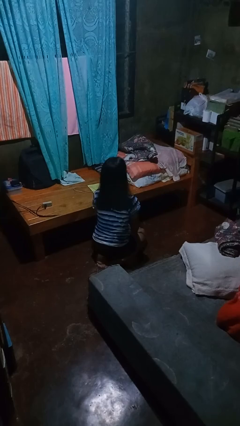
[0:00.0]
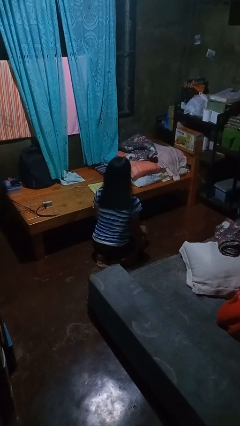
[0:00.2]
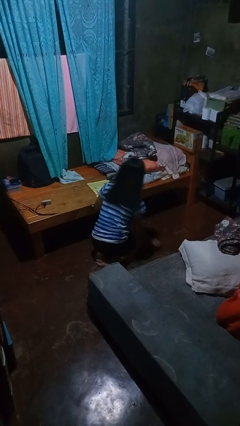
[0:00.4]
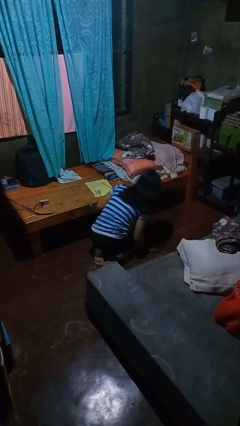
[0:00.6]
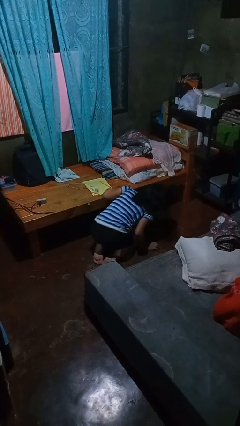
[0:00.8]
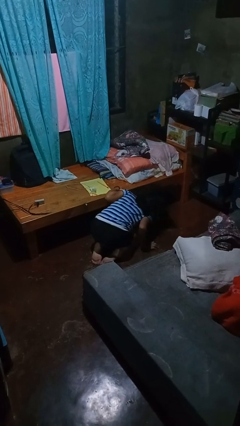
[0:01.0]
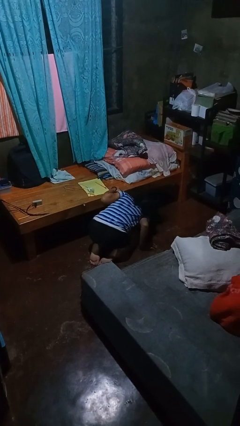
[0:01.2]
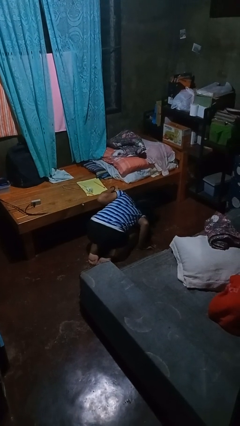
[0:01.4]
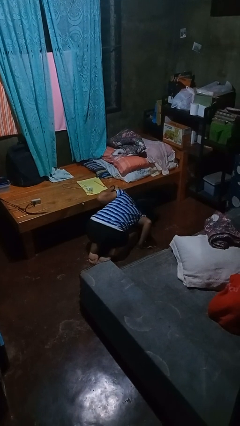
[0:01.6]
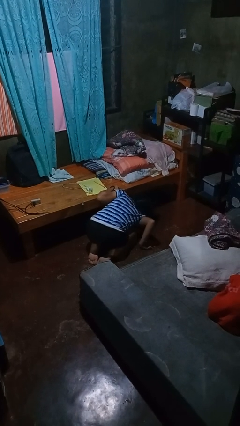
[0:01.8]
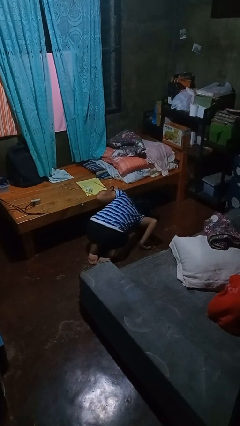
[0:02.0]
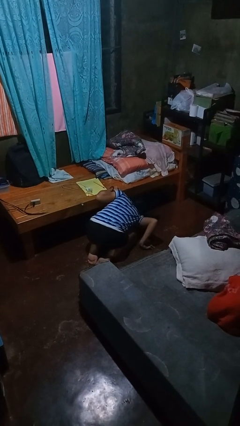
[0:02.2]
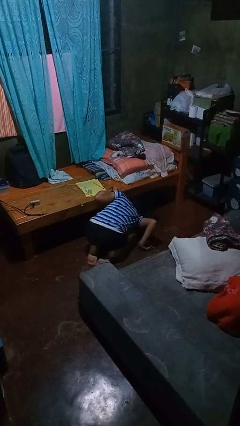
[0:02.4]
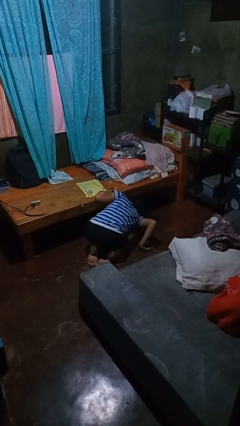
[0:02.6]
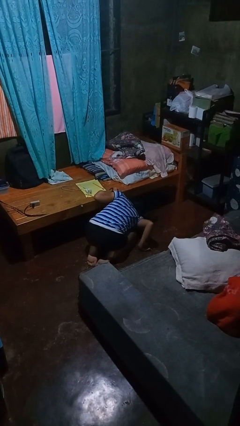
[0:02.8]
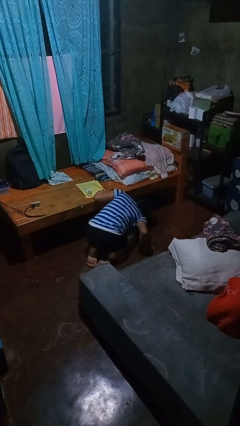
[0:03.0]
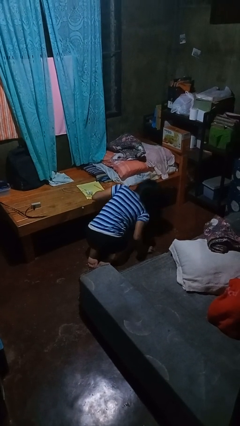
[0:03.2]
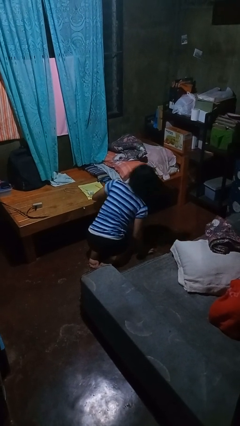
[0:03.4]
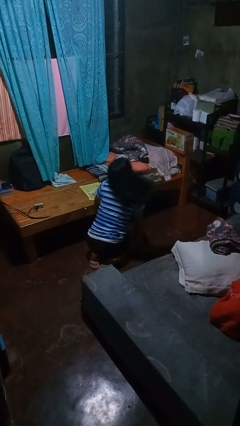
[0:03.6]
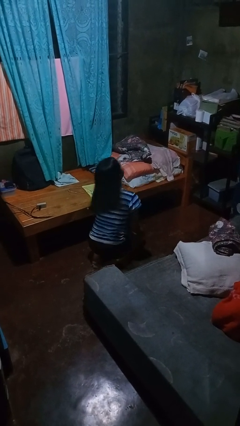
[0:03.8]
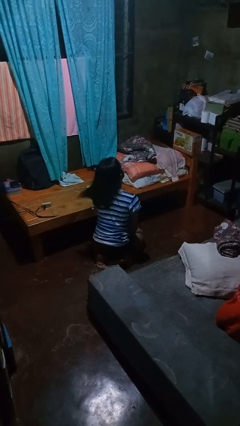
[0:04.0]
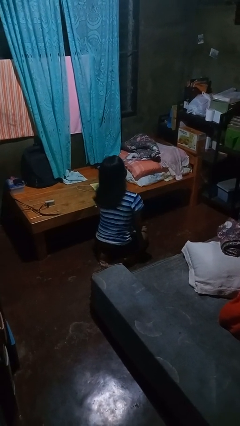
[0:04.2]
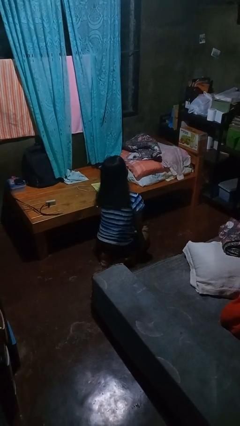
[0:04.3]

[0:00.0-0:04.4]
person searches under bed

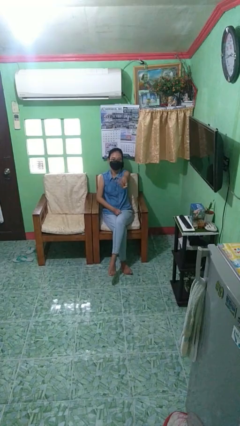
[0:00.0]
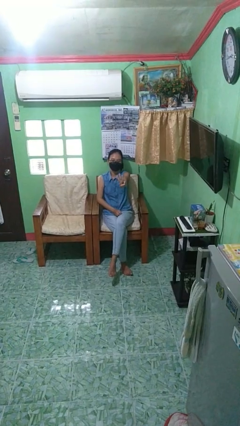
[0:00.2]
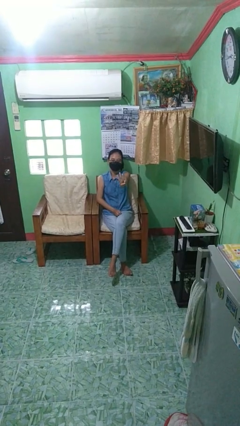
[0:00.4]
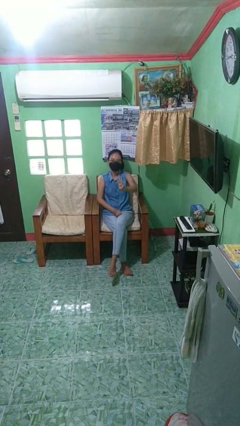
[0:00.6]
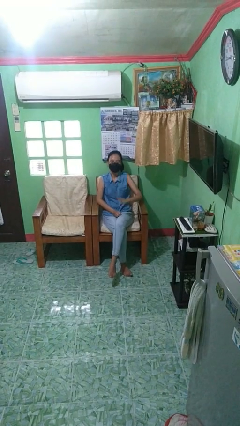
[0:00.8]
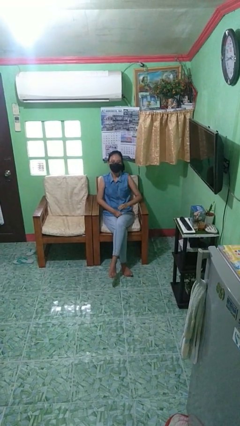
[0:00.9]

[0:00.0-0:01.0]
person gestures number three

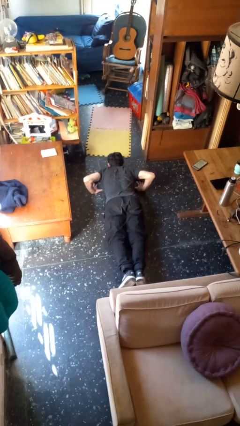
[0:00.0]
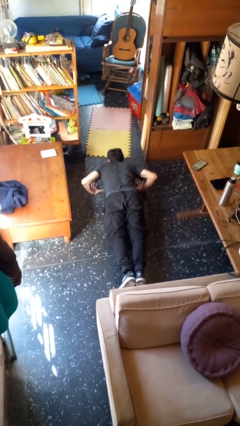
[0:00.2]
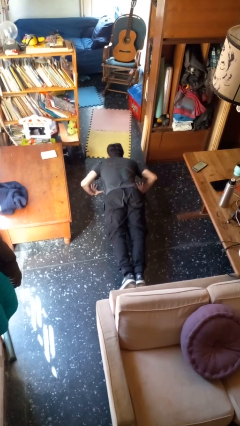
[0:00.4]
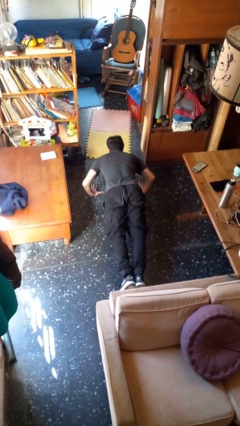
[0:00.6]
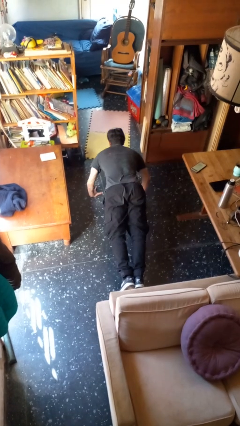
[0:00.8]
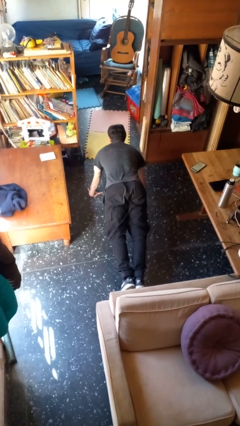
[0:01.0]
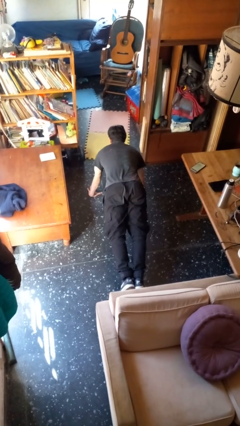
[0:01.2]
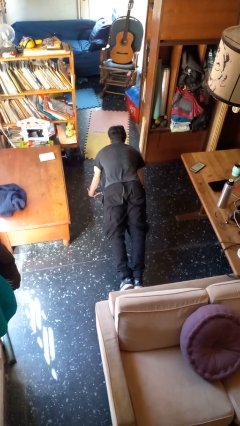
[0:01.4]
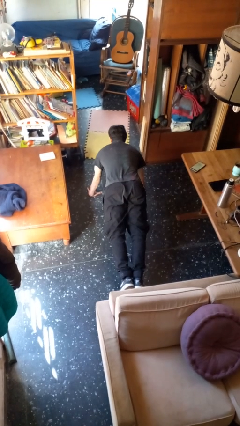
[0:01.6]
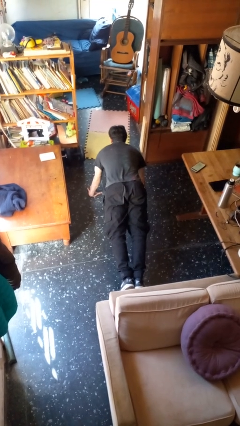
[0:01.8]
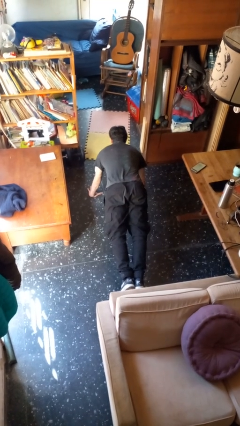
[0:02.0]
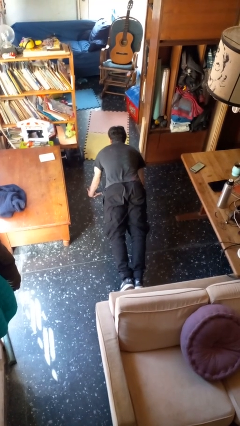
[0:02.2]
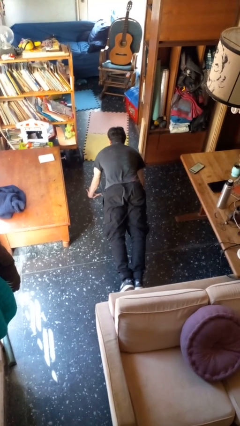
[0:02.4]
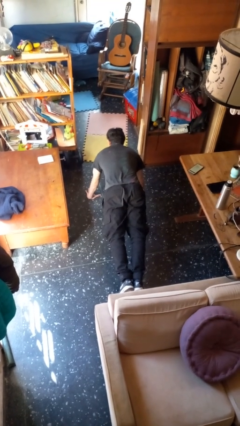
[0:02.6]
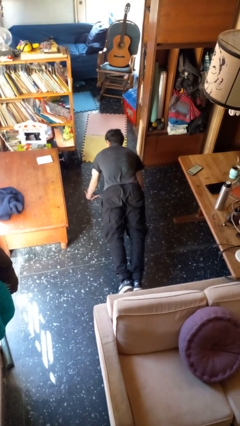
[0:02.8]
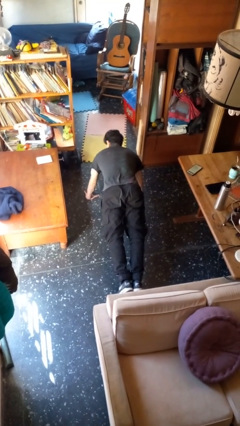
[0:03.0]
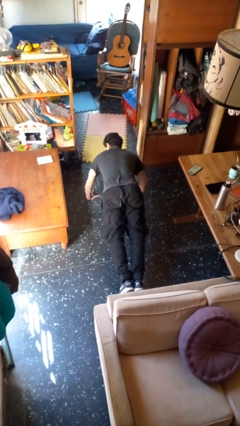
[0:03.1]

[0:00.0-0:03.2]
person exercises with pushup

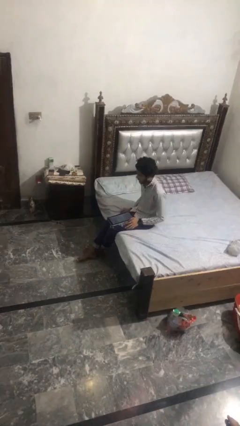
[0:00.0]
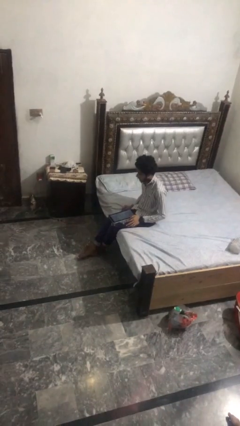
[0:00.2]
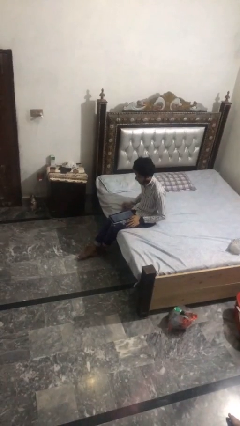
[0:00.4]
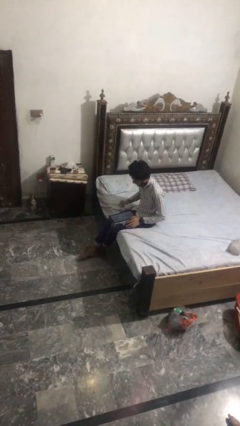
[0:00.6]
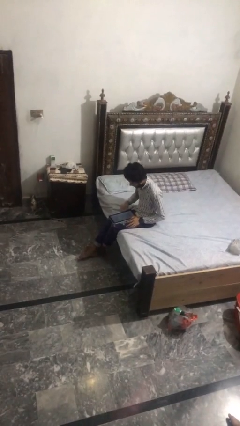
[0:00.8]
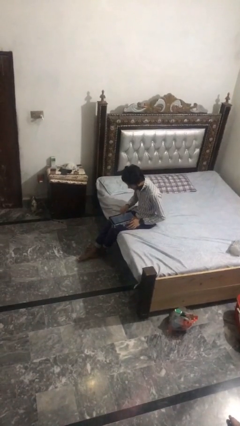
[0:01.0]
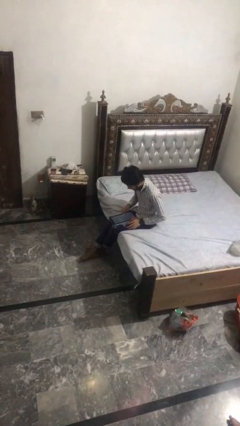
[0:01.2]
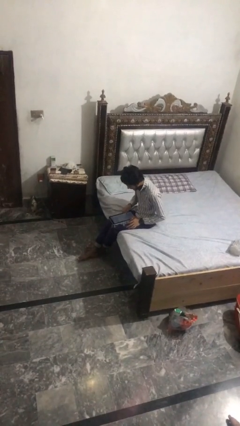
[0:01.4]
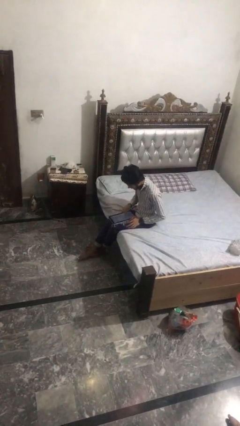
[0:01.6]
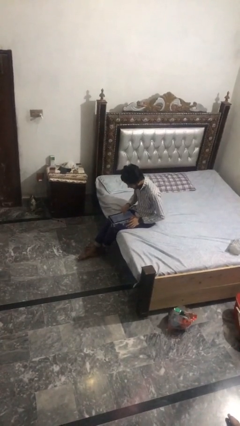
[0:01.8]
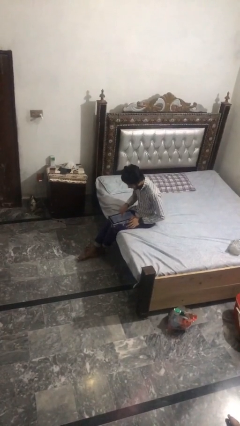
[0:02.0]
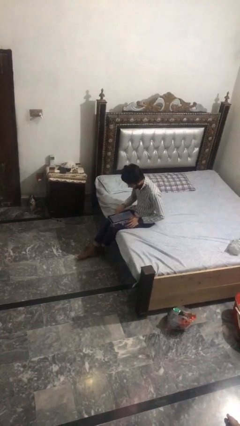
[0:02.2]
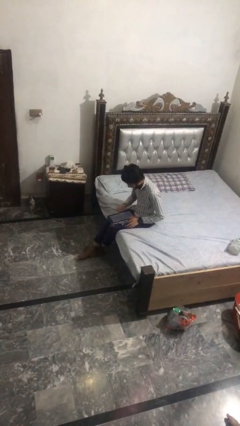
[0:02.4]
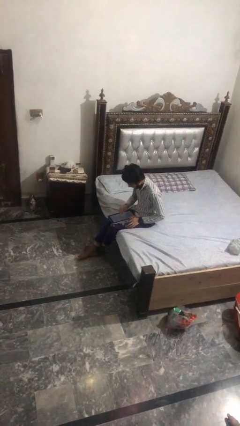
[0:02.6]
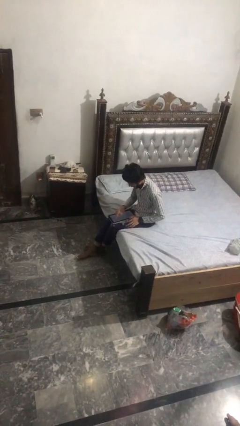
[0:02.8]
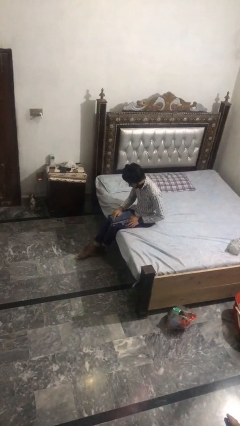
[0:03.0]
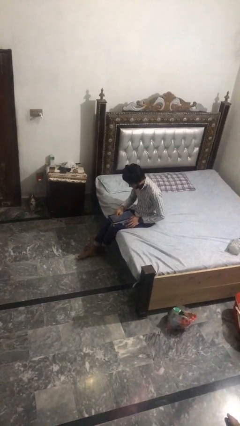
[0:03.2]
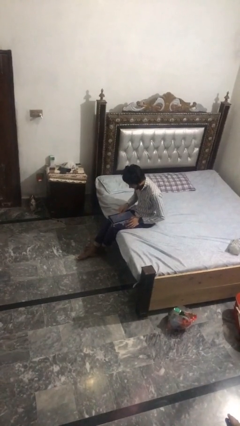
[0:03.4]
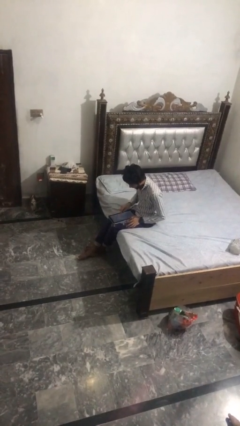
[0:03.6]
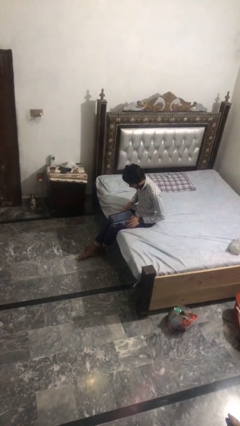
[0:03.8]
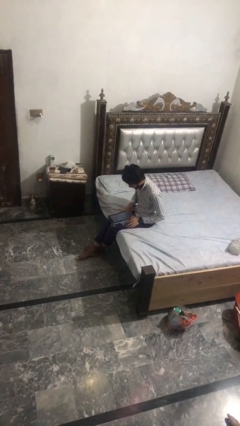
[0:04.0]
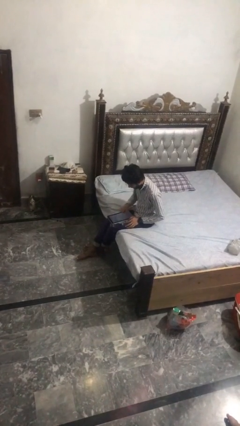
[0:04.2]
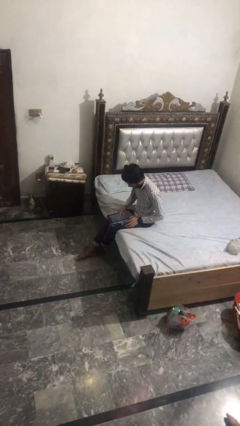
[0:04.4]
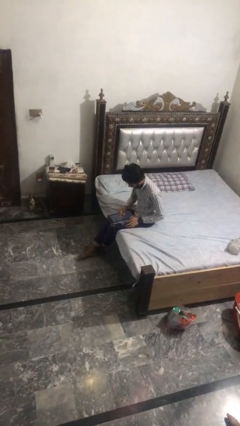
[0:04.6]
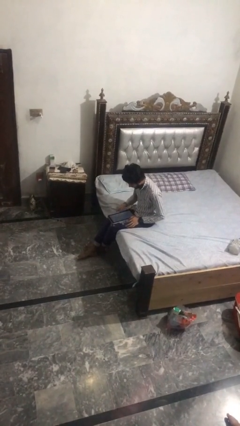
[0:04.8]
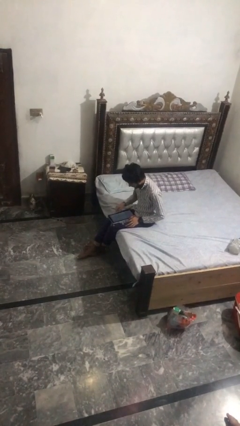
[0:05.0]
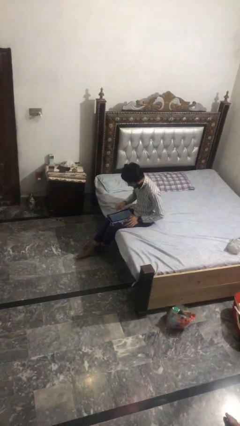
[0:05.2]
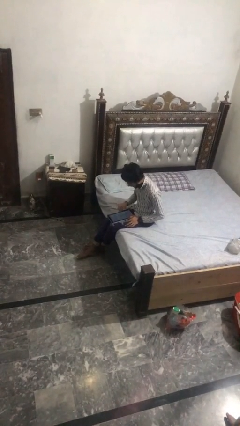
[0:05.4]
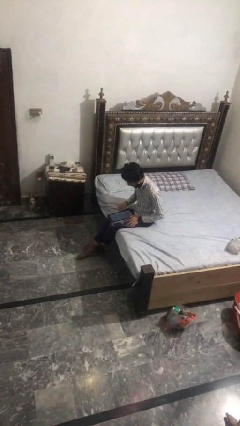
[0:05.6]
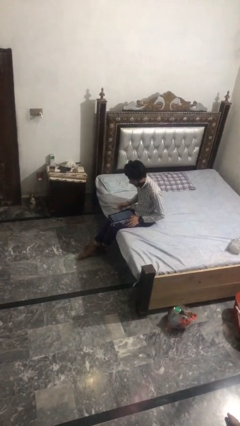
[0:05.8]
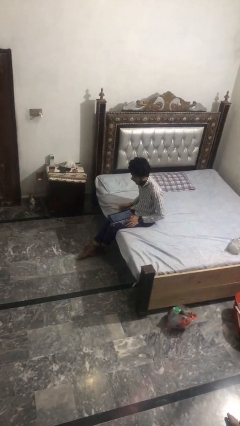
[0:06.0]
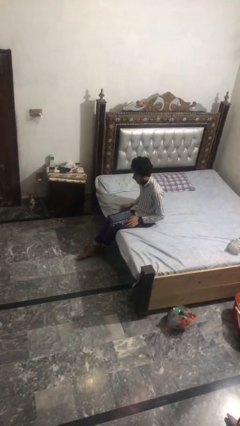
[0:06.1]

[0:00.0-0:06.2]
person interacts with tablet

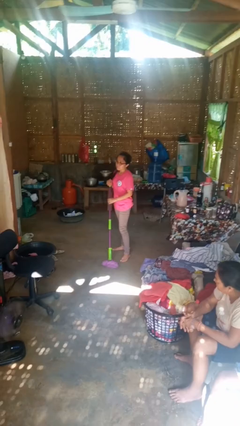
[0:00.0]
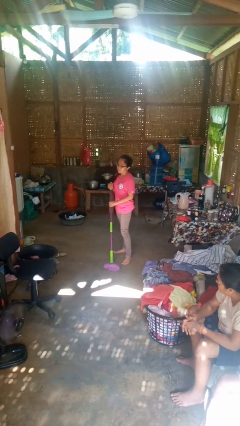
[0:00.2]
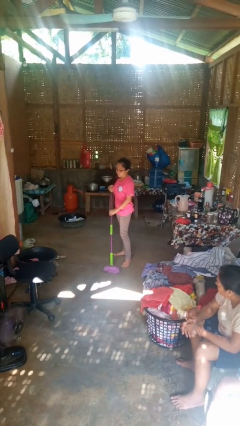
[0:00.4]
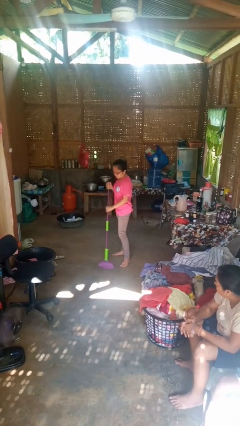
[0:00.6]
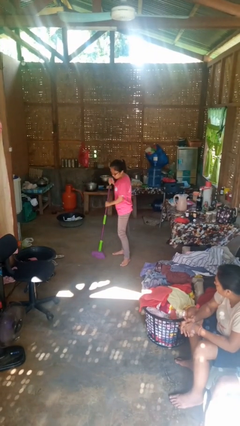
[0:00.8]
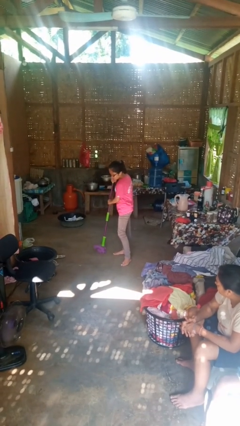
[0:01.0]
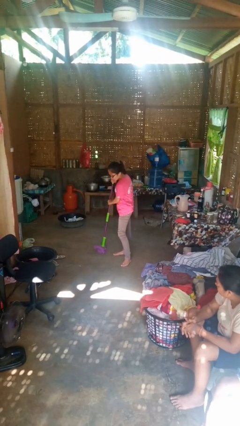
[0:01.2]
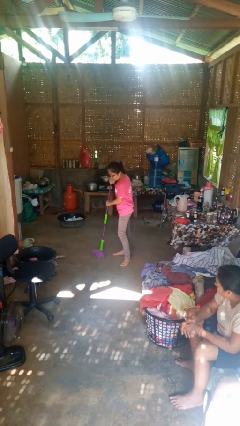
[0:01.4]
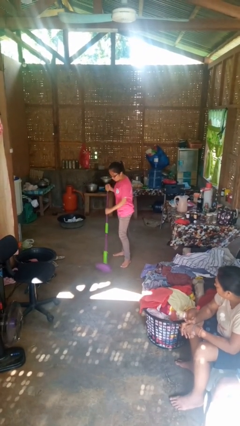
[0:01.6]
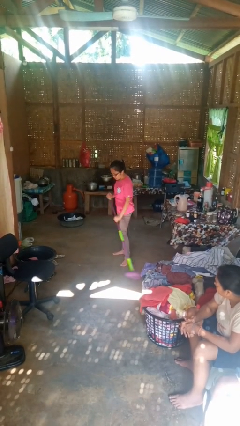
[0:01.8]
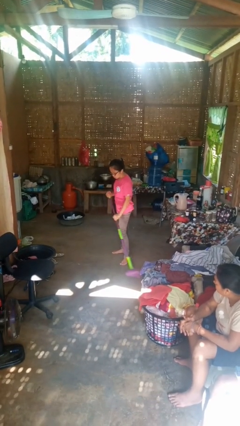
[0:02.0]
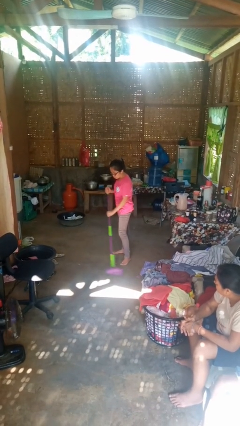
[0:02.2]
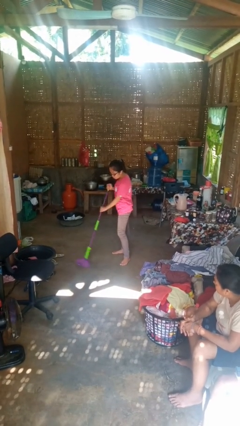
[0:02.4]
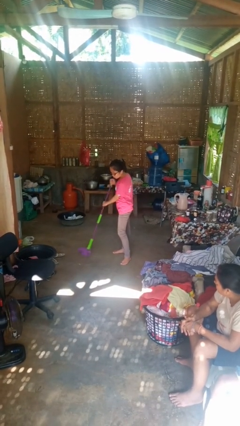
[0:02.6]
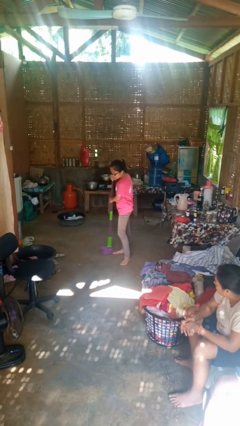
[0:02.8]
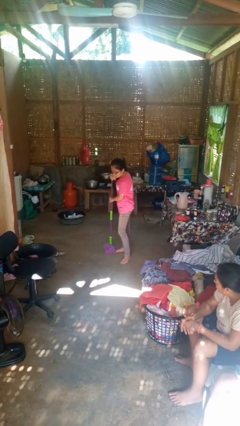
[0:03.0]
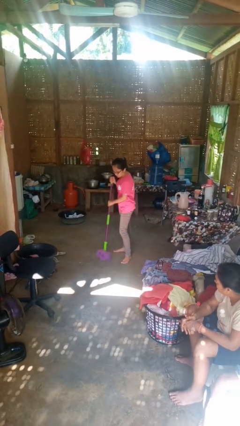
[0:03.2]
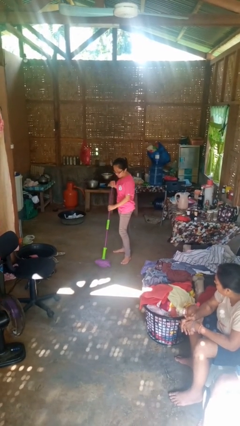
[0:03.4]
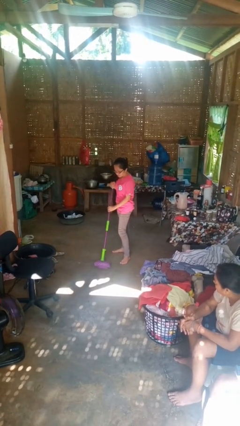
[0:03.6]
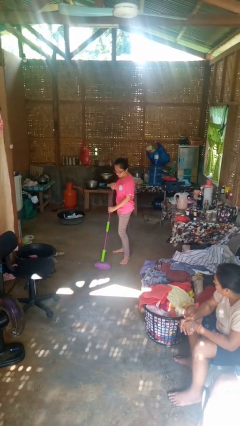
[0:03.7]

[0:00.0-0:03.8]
person mops
